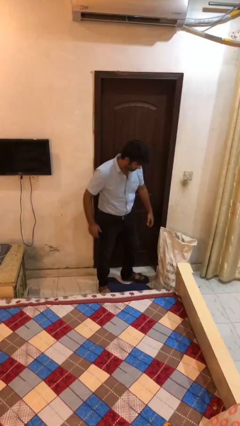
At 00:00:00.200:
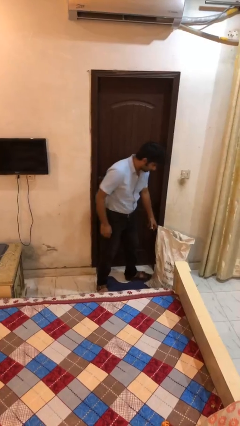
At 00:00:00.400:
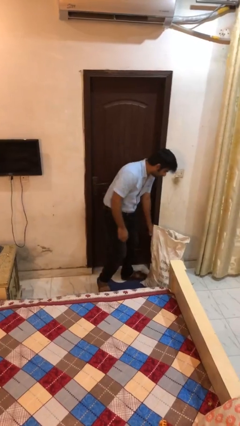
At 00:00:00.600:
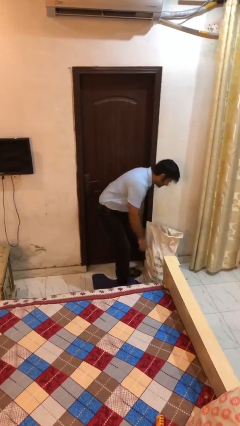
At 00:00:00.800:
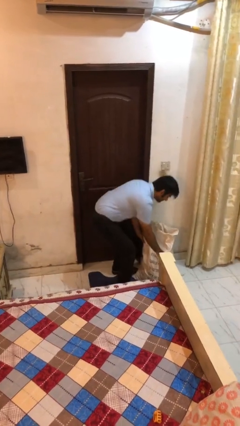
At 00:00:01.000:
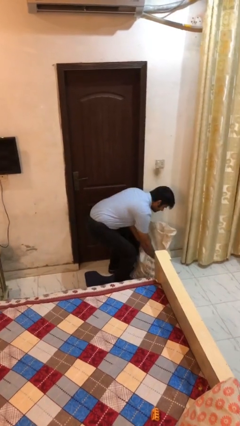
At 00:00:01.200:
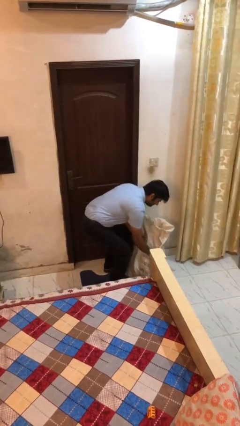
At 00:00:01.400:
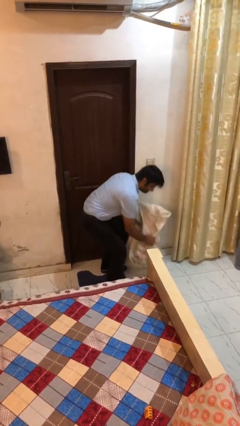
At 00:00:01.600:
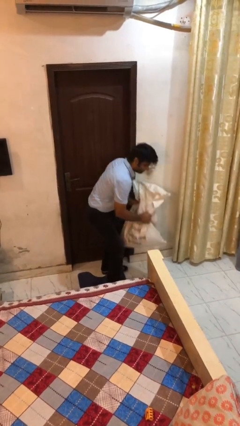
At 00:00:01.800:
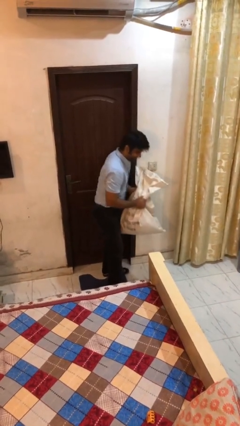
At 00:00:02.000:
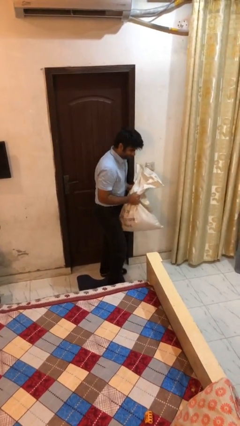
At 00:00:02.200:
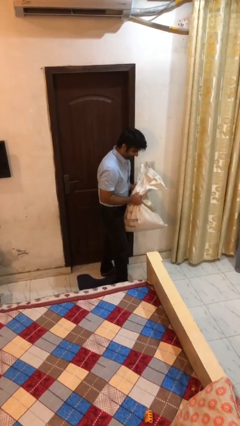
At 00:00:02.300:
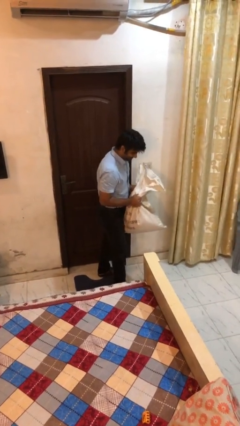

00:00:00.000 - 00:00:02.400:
person picks up object from floor

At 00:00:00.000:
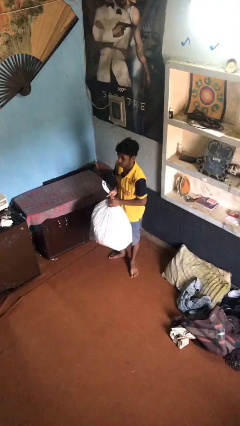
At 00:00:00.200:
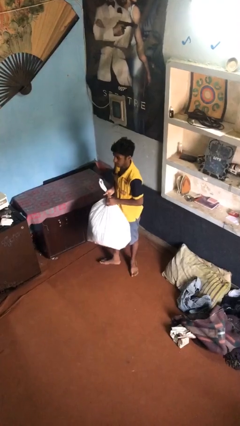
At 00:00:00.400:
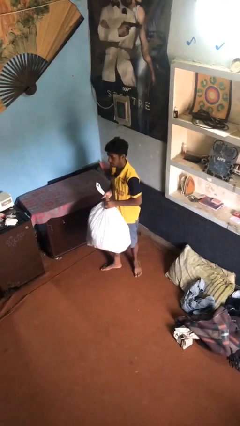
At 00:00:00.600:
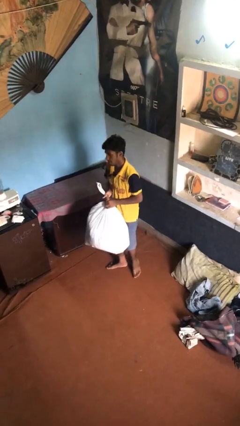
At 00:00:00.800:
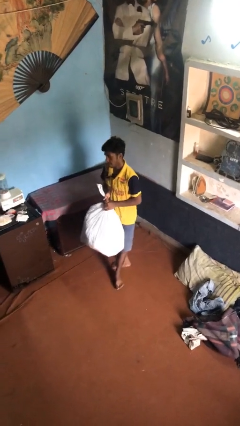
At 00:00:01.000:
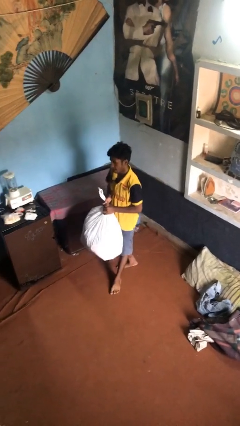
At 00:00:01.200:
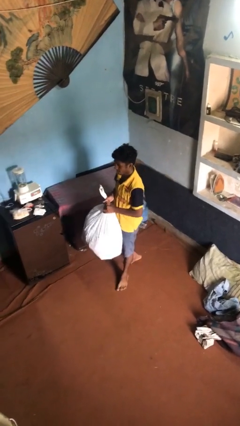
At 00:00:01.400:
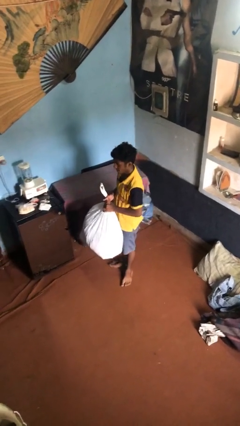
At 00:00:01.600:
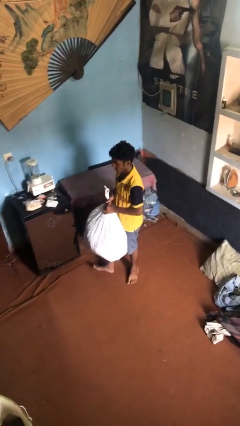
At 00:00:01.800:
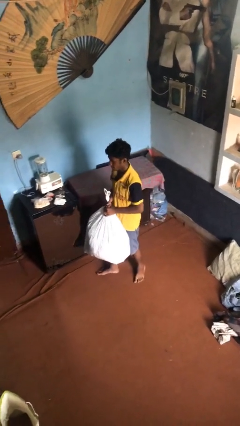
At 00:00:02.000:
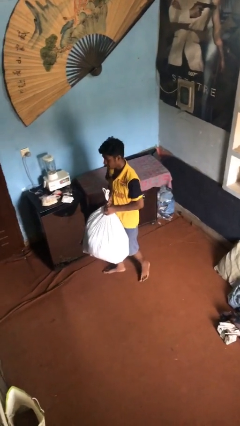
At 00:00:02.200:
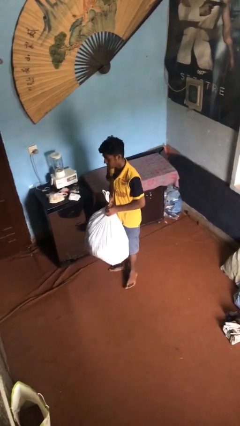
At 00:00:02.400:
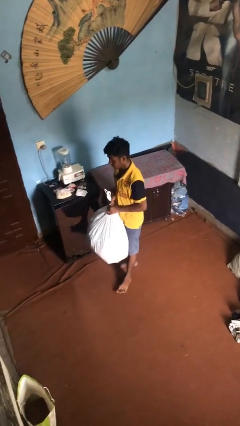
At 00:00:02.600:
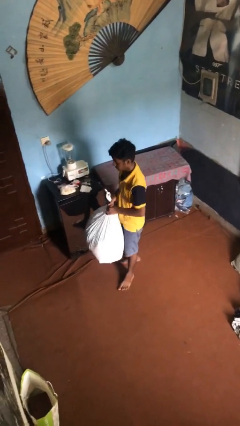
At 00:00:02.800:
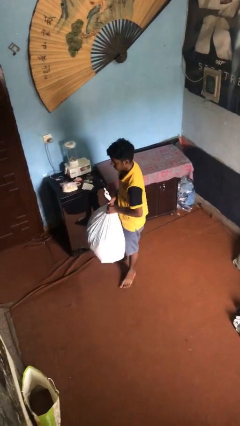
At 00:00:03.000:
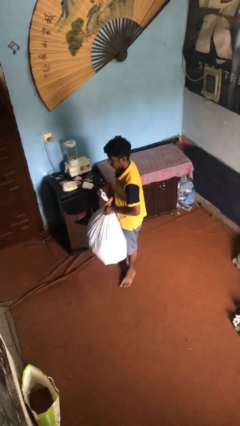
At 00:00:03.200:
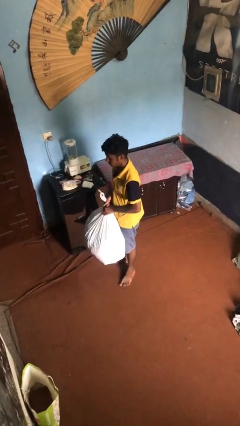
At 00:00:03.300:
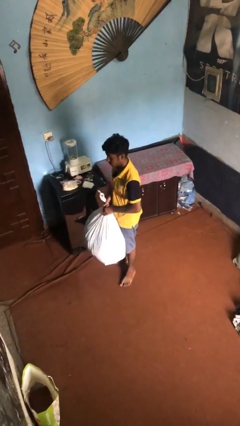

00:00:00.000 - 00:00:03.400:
person carries heavy object

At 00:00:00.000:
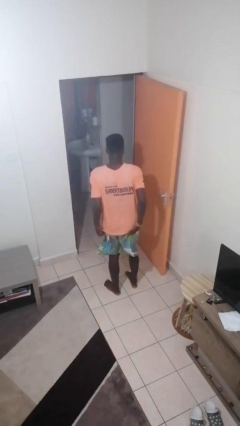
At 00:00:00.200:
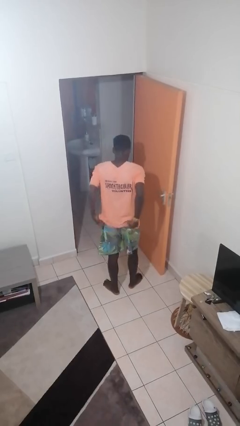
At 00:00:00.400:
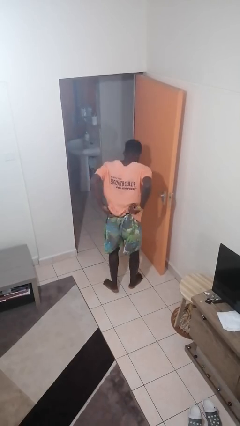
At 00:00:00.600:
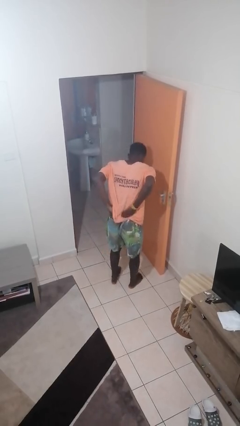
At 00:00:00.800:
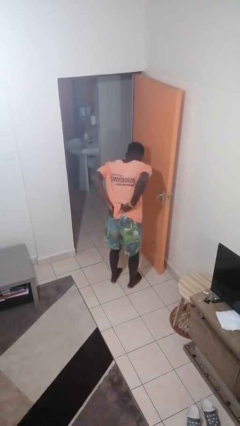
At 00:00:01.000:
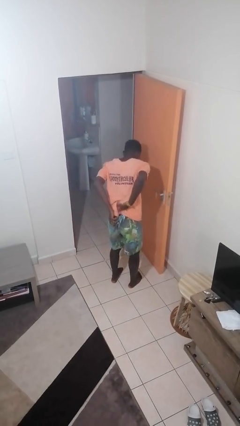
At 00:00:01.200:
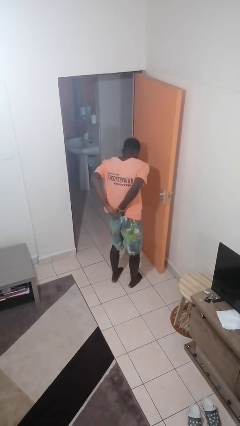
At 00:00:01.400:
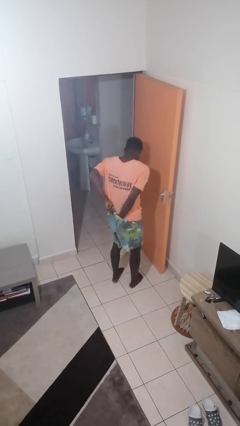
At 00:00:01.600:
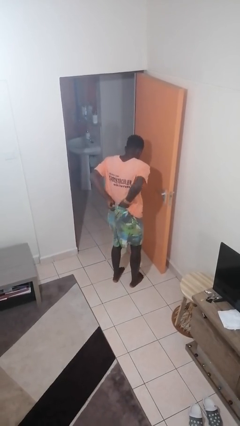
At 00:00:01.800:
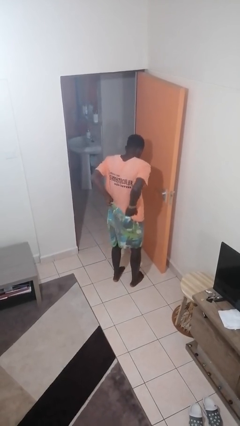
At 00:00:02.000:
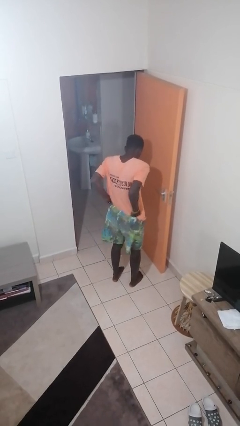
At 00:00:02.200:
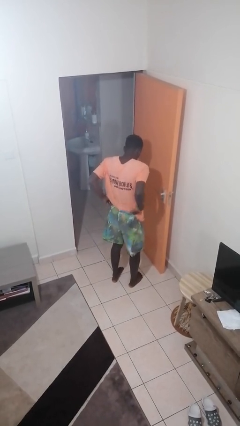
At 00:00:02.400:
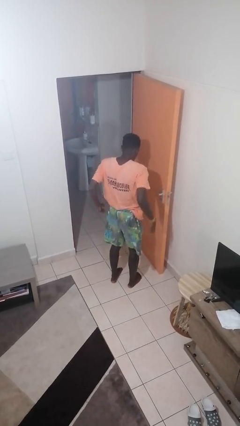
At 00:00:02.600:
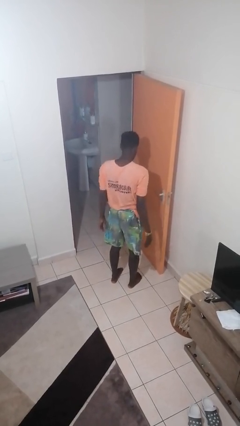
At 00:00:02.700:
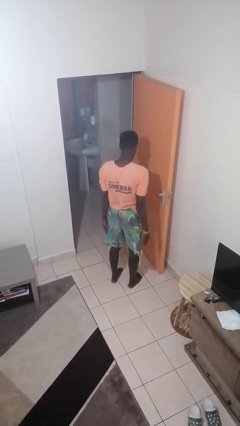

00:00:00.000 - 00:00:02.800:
person tucks in shirt

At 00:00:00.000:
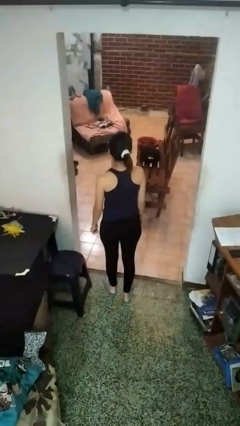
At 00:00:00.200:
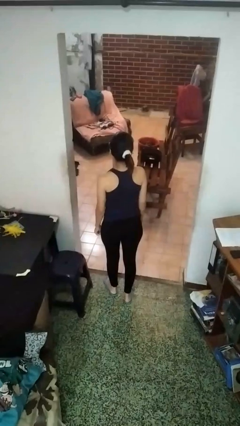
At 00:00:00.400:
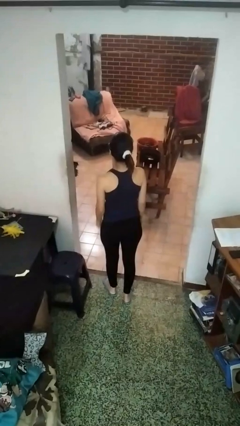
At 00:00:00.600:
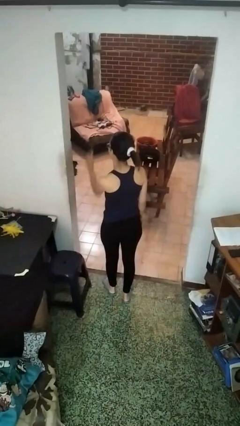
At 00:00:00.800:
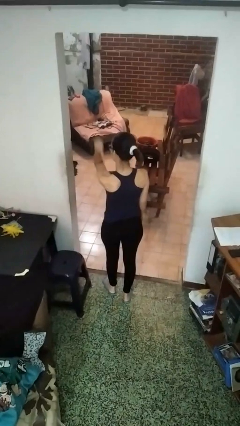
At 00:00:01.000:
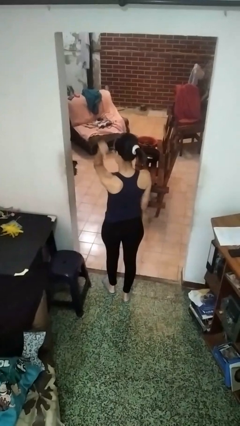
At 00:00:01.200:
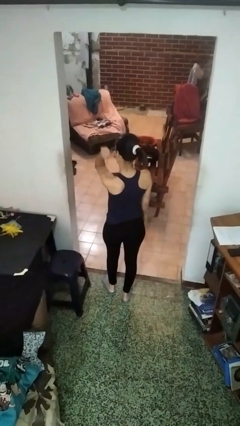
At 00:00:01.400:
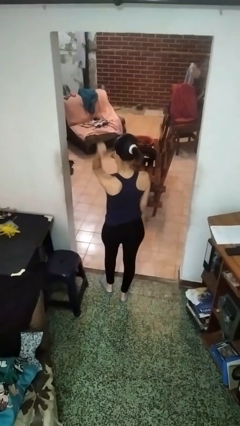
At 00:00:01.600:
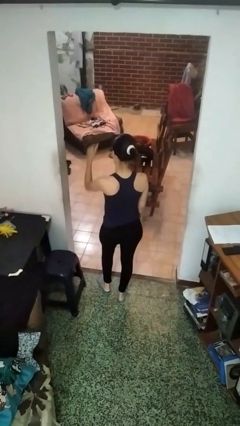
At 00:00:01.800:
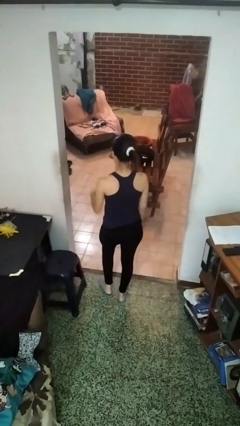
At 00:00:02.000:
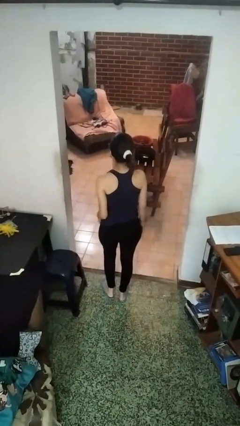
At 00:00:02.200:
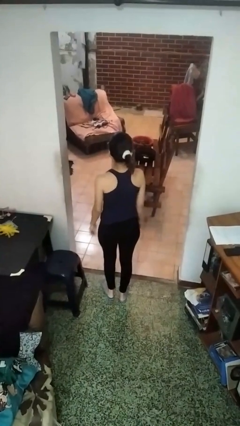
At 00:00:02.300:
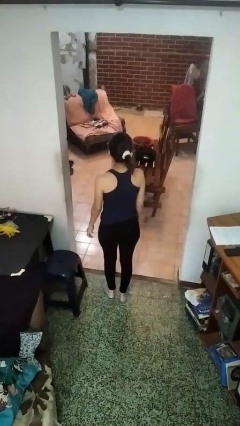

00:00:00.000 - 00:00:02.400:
person gestures behind me

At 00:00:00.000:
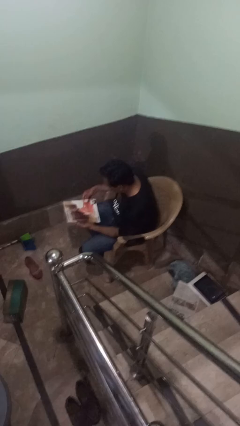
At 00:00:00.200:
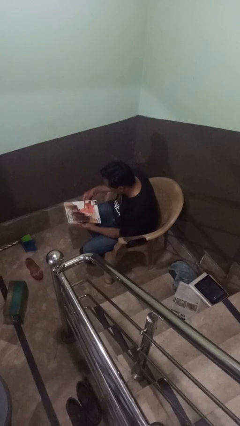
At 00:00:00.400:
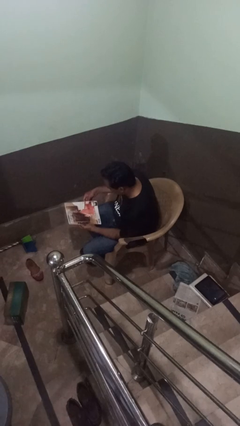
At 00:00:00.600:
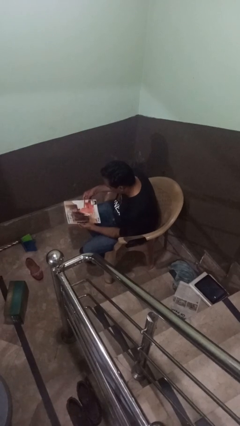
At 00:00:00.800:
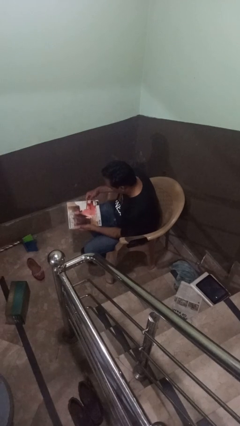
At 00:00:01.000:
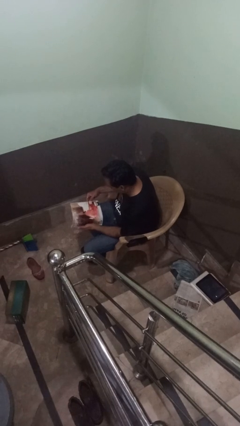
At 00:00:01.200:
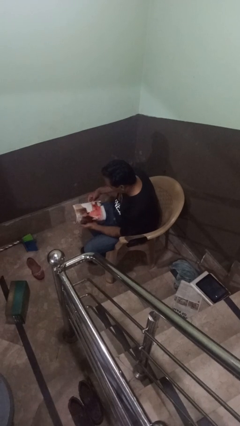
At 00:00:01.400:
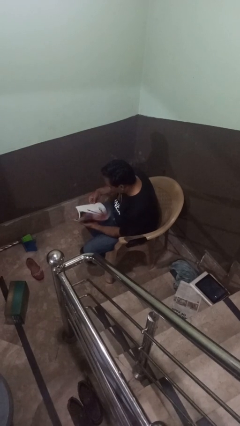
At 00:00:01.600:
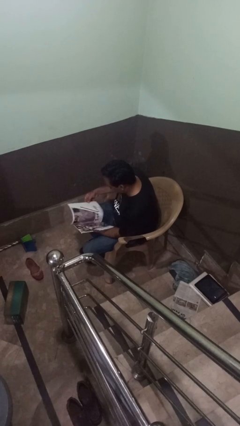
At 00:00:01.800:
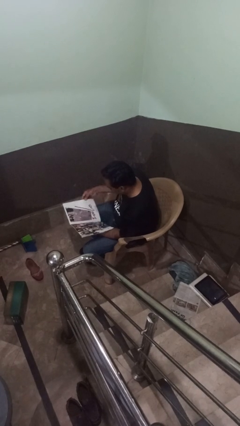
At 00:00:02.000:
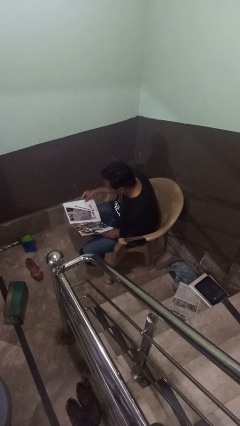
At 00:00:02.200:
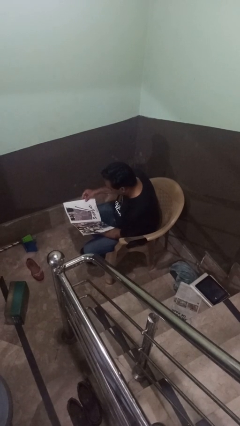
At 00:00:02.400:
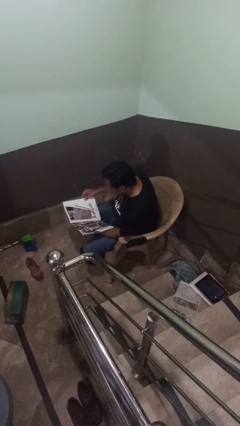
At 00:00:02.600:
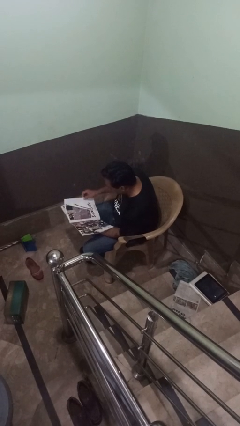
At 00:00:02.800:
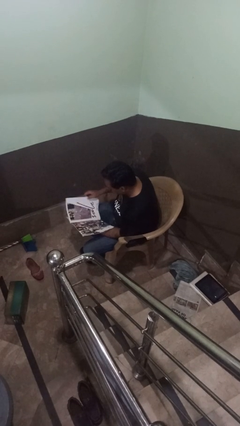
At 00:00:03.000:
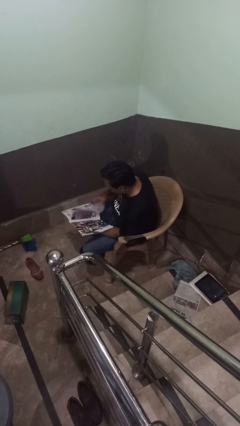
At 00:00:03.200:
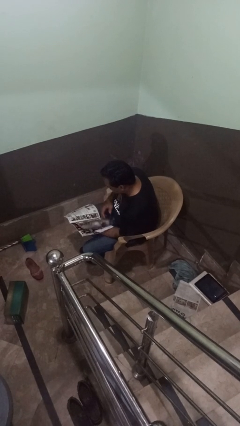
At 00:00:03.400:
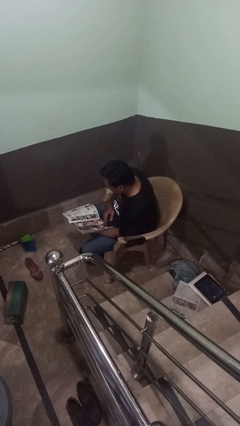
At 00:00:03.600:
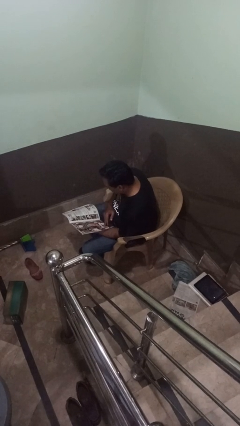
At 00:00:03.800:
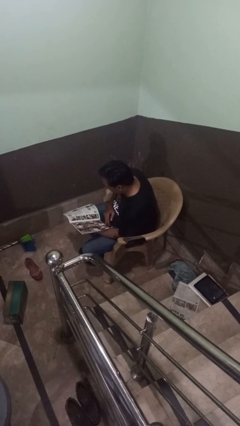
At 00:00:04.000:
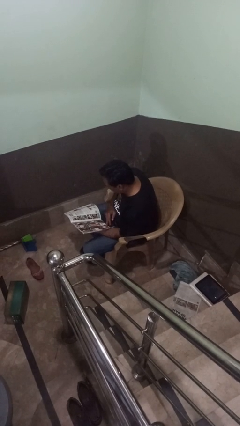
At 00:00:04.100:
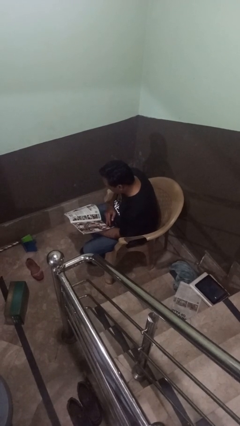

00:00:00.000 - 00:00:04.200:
person reads magazine

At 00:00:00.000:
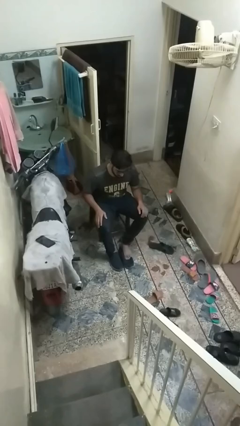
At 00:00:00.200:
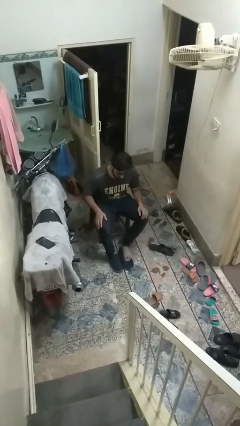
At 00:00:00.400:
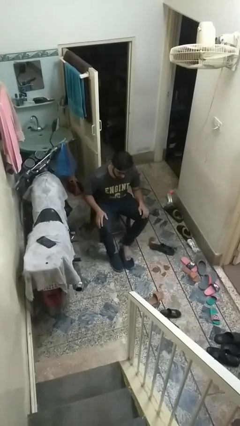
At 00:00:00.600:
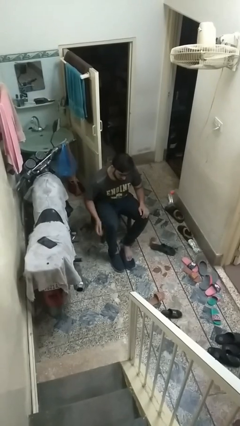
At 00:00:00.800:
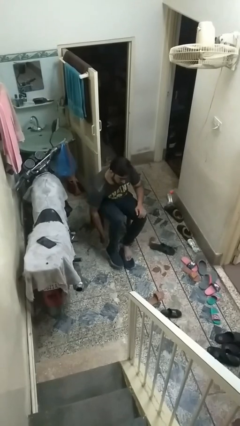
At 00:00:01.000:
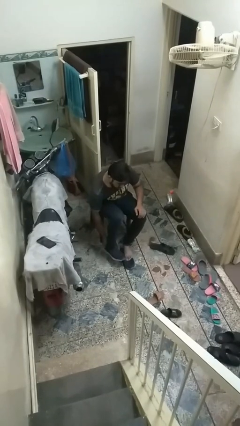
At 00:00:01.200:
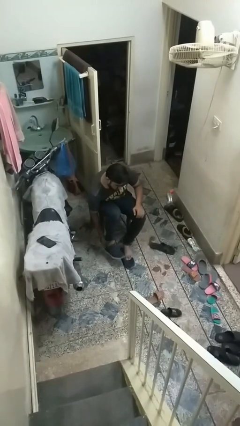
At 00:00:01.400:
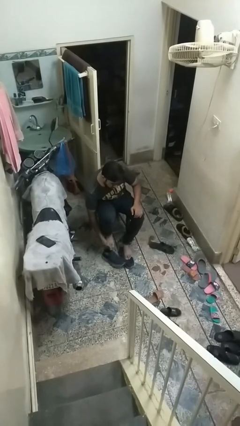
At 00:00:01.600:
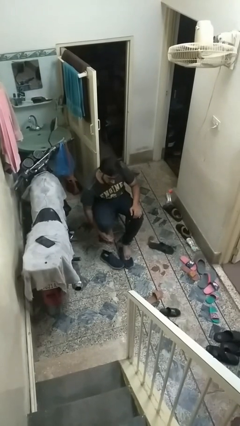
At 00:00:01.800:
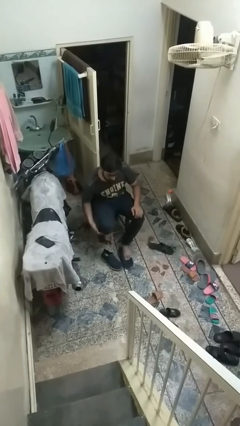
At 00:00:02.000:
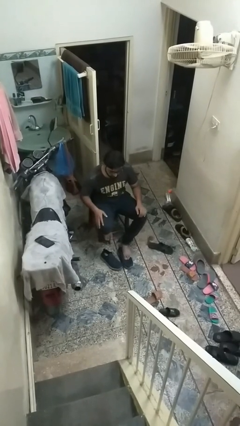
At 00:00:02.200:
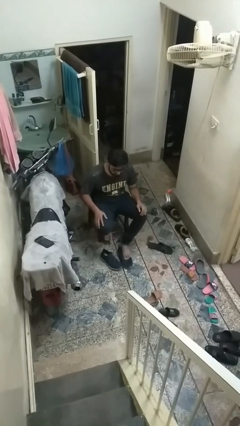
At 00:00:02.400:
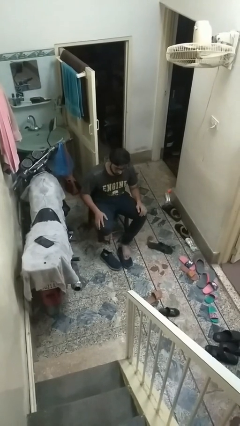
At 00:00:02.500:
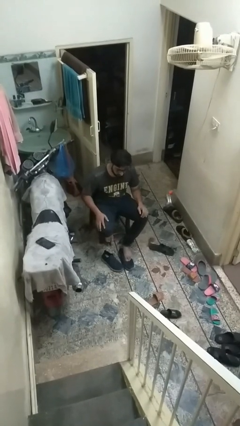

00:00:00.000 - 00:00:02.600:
person takes off shoes
